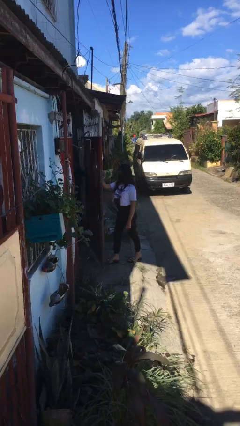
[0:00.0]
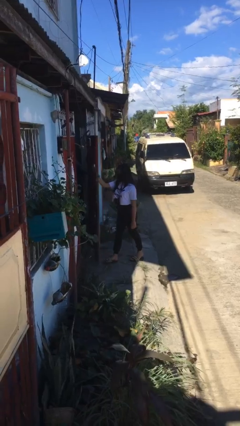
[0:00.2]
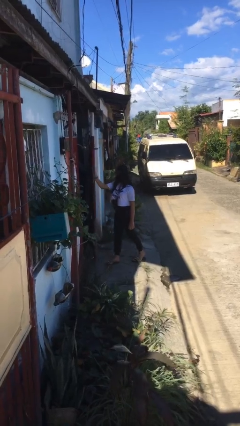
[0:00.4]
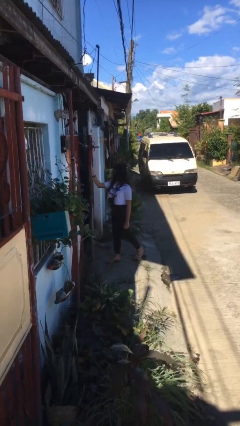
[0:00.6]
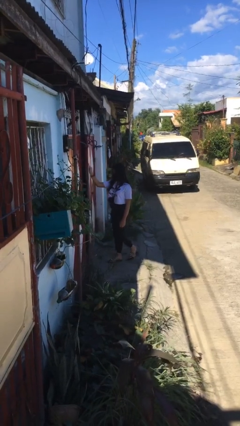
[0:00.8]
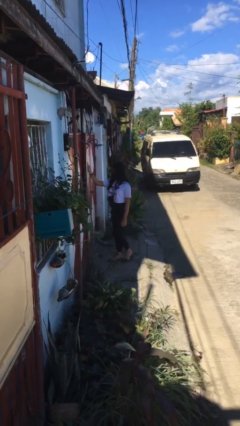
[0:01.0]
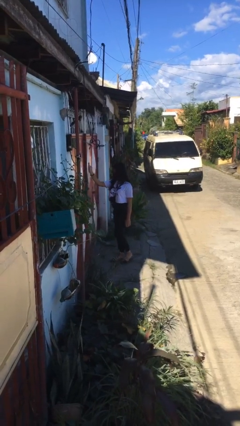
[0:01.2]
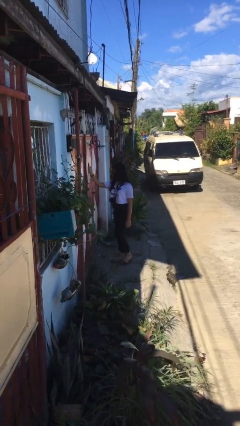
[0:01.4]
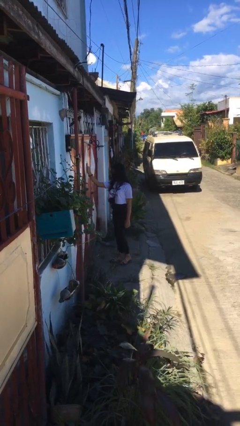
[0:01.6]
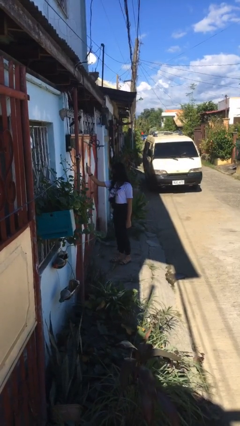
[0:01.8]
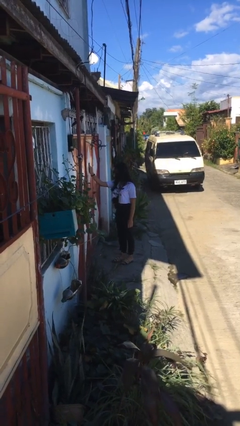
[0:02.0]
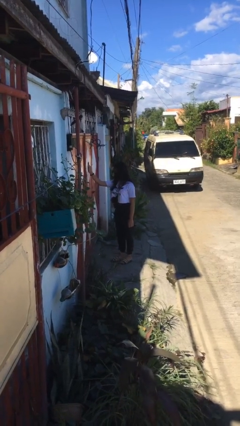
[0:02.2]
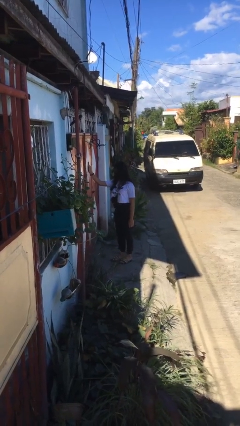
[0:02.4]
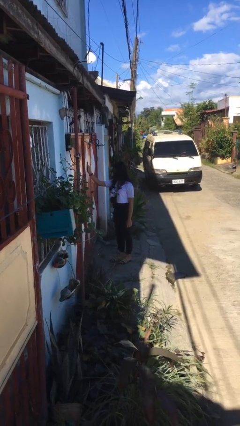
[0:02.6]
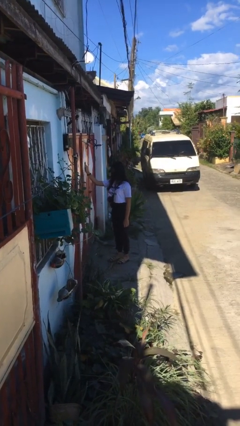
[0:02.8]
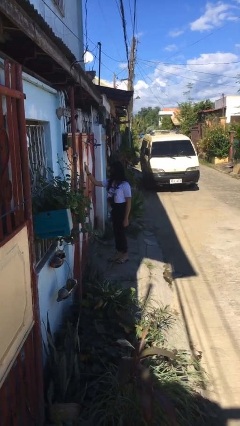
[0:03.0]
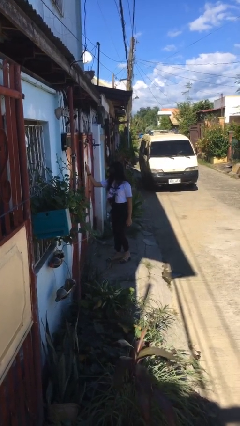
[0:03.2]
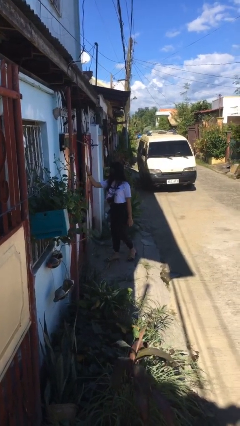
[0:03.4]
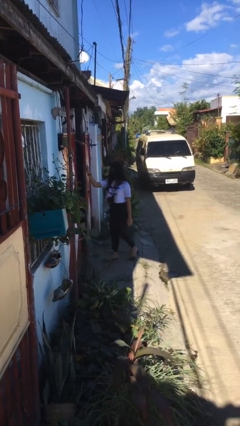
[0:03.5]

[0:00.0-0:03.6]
person closes gate

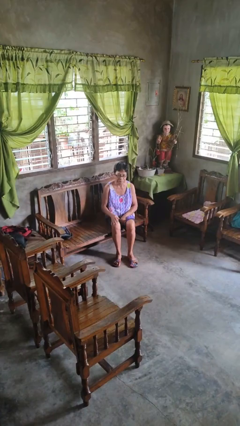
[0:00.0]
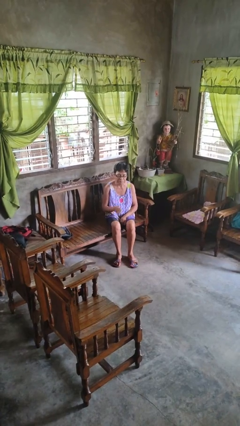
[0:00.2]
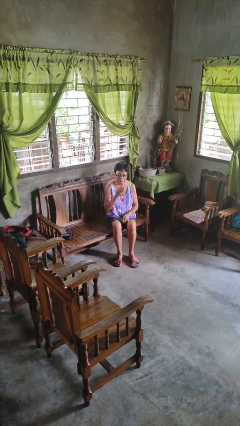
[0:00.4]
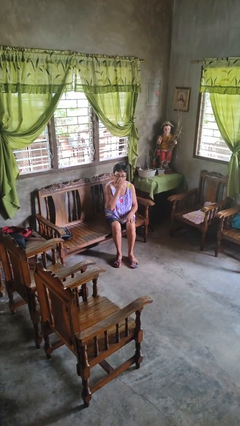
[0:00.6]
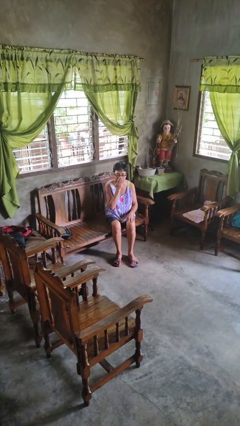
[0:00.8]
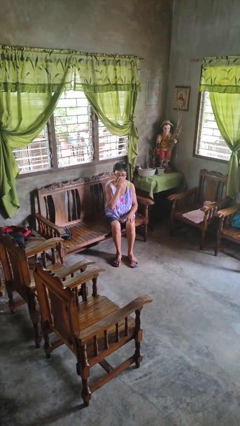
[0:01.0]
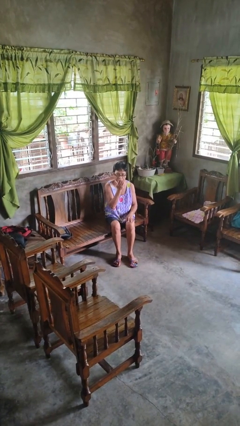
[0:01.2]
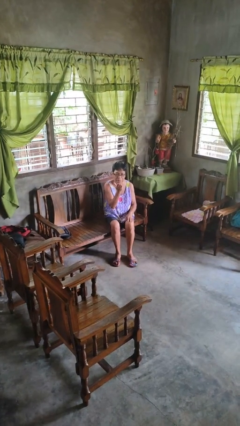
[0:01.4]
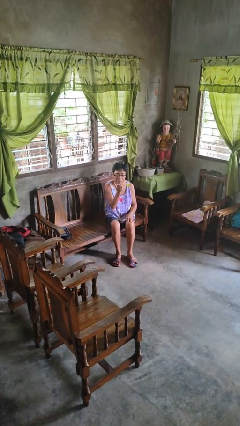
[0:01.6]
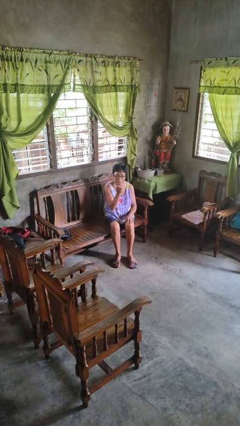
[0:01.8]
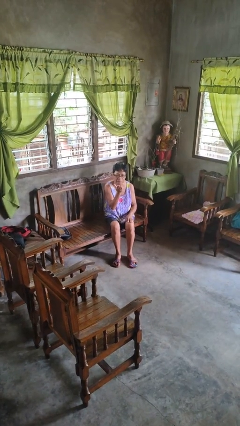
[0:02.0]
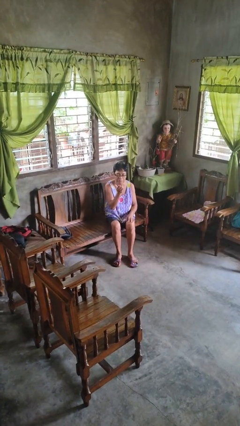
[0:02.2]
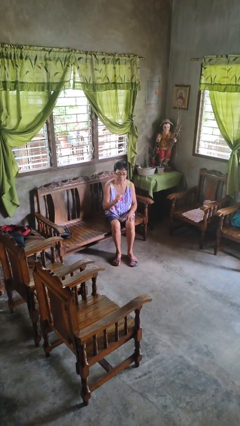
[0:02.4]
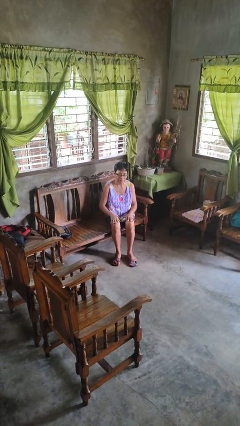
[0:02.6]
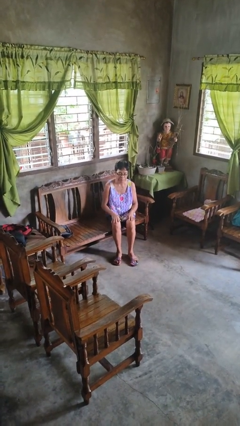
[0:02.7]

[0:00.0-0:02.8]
person gestures blow kiss

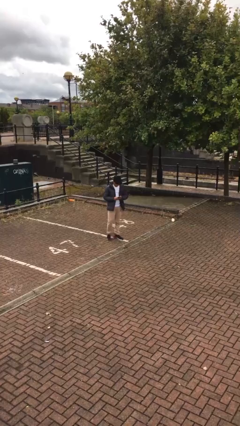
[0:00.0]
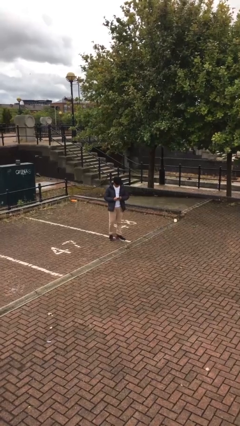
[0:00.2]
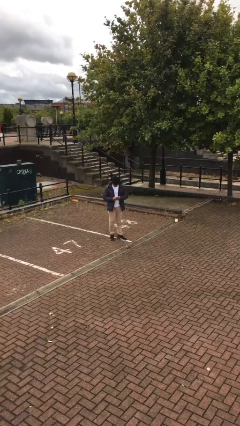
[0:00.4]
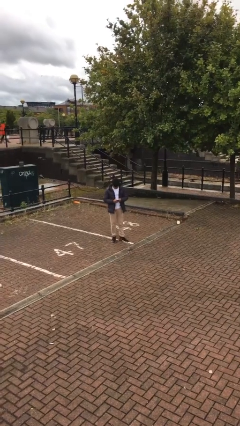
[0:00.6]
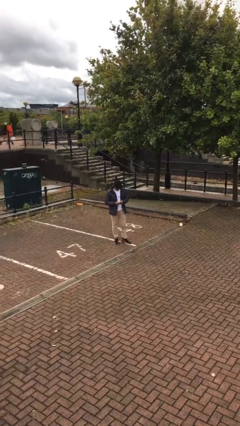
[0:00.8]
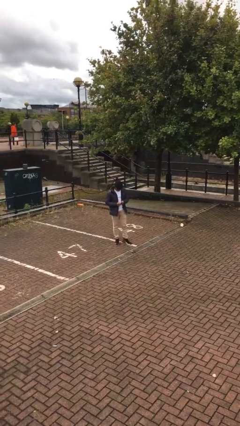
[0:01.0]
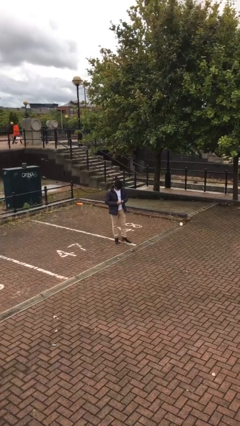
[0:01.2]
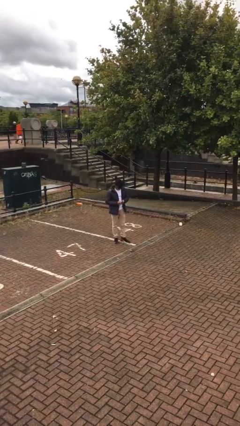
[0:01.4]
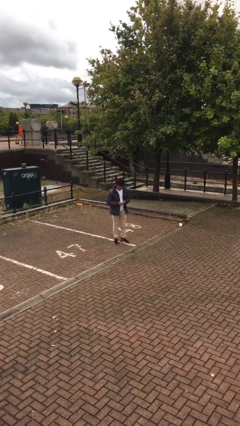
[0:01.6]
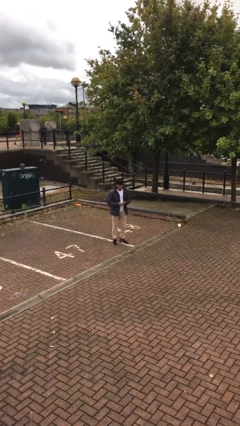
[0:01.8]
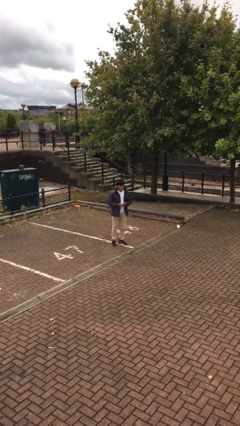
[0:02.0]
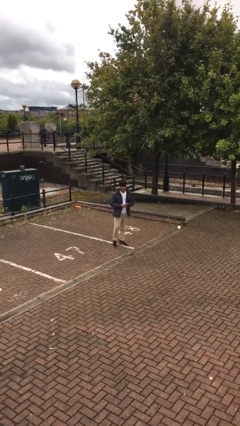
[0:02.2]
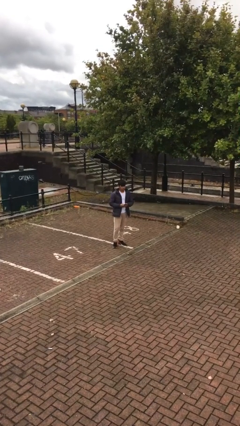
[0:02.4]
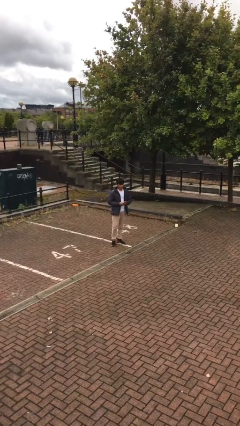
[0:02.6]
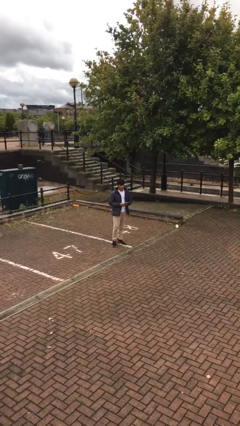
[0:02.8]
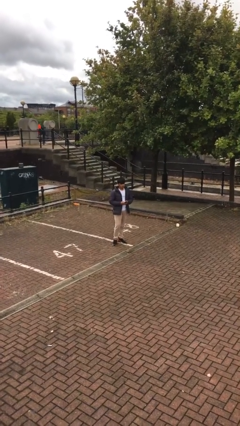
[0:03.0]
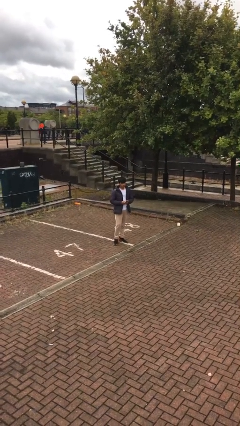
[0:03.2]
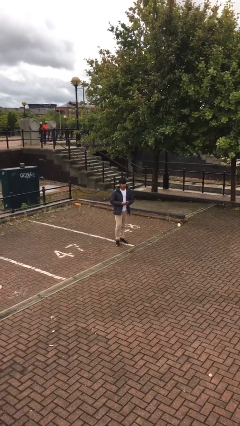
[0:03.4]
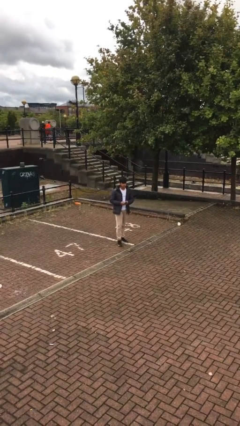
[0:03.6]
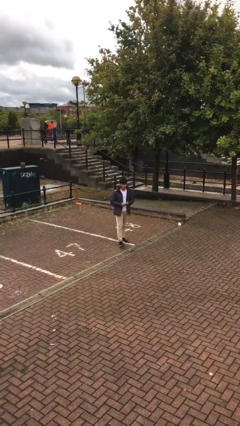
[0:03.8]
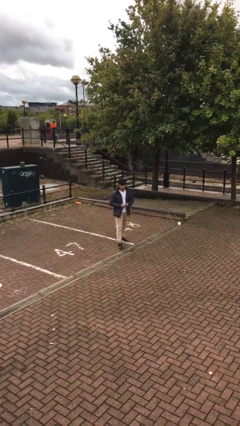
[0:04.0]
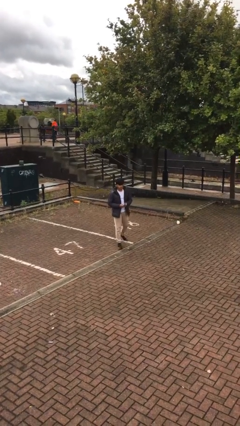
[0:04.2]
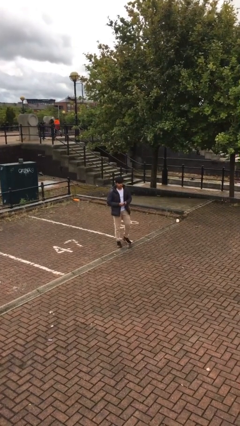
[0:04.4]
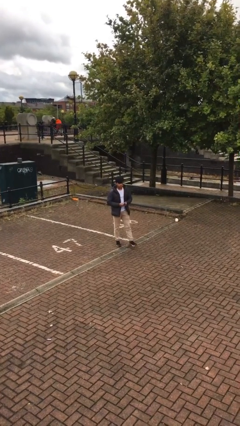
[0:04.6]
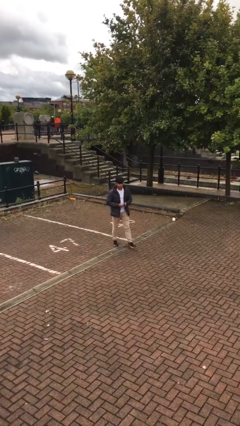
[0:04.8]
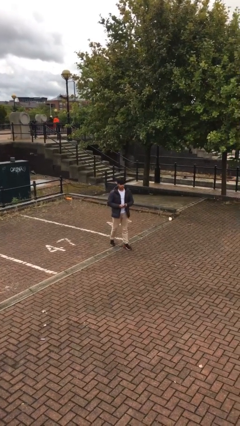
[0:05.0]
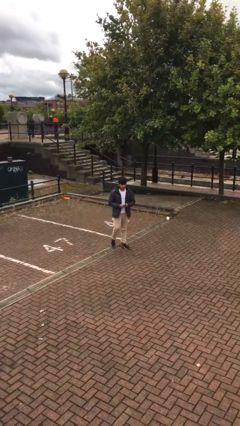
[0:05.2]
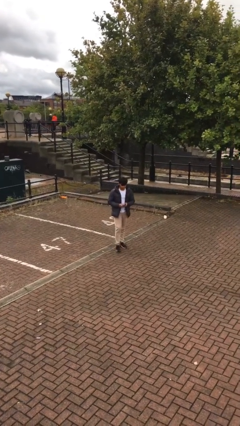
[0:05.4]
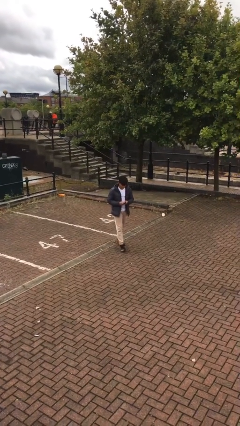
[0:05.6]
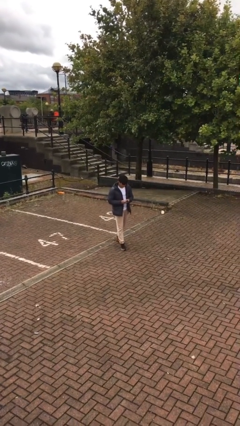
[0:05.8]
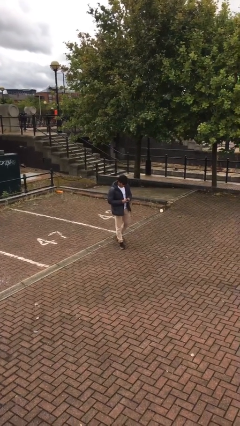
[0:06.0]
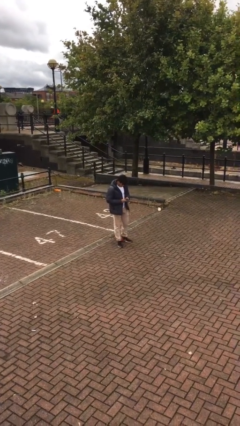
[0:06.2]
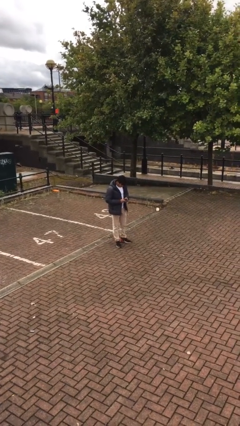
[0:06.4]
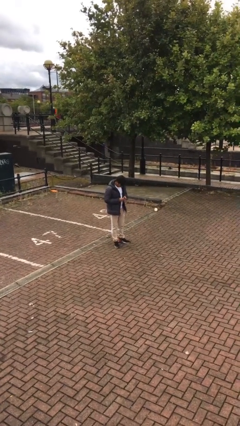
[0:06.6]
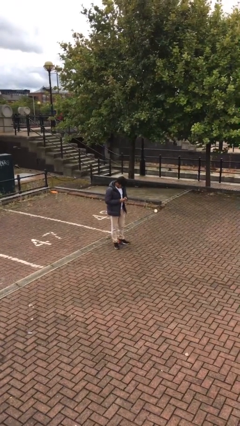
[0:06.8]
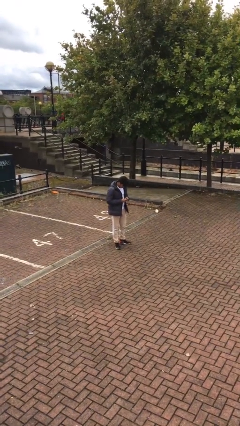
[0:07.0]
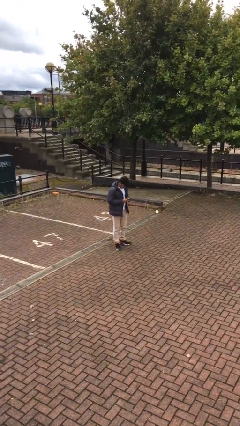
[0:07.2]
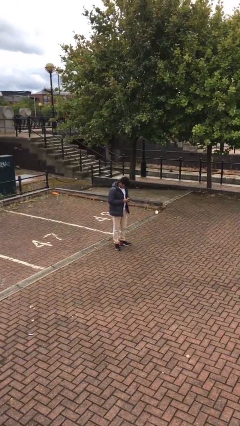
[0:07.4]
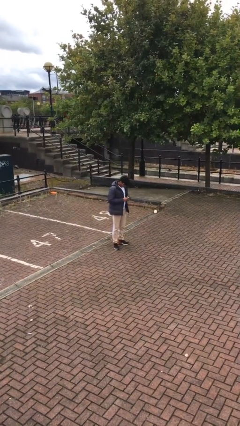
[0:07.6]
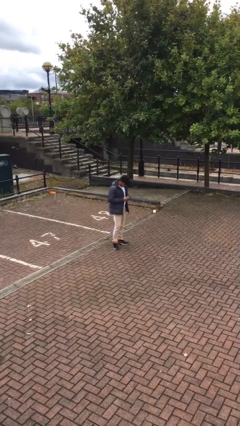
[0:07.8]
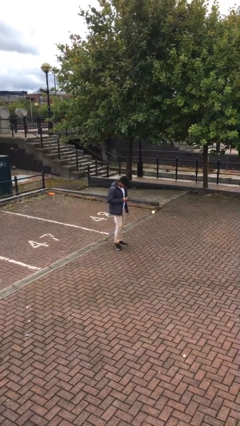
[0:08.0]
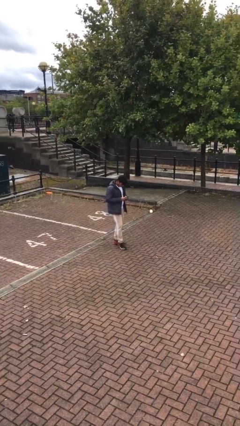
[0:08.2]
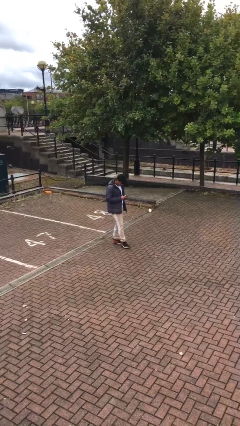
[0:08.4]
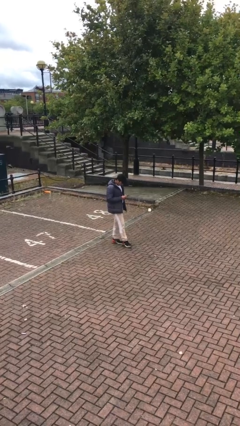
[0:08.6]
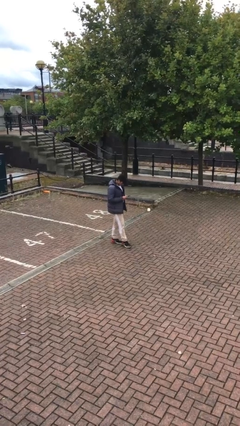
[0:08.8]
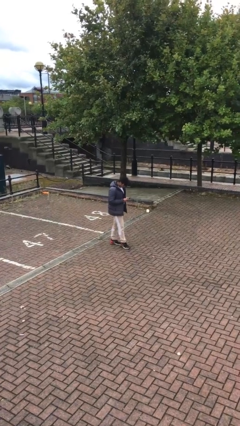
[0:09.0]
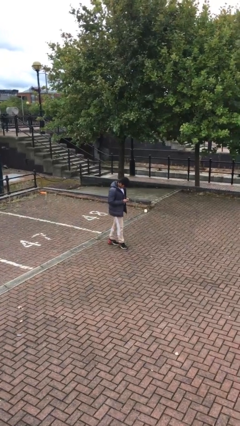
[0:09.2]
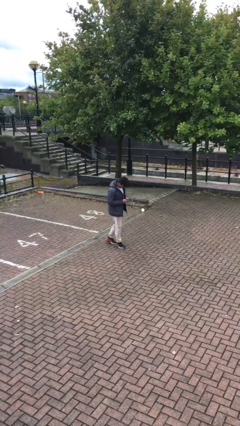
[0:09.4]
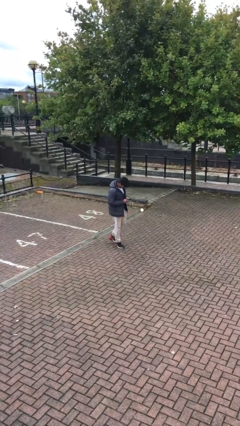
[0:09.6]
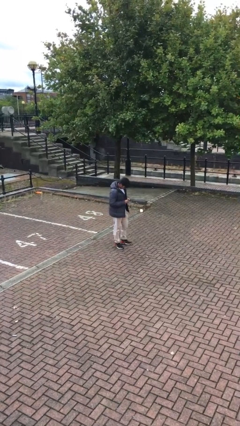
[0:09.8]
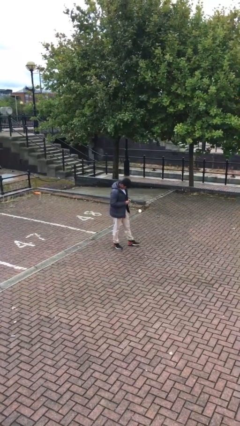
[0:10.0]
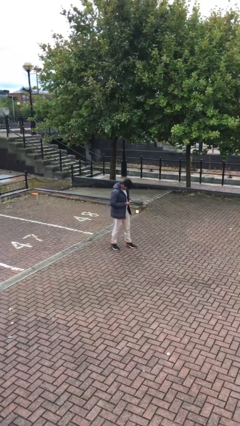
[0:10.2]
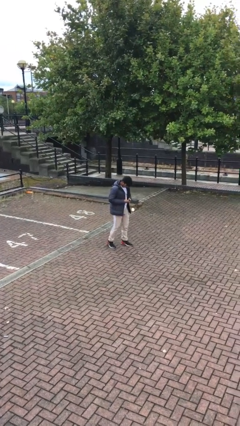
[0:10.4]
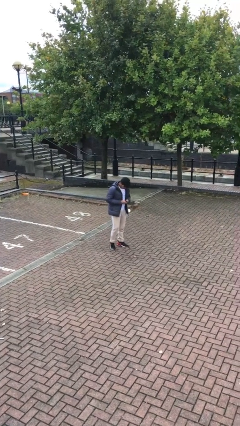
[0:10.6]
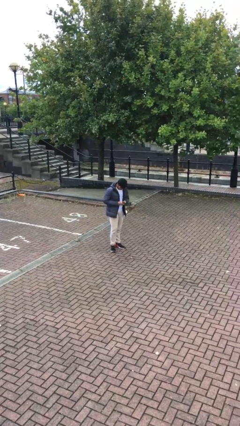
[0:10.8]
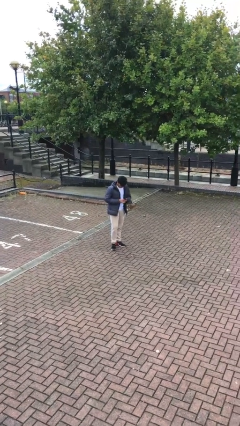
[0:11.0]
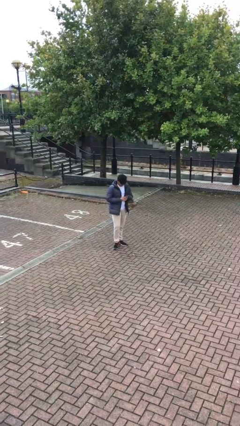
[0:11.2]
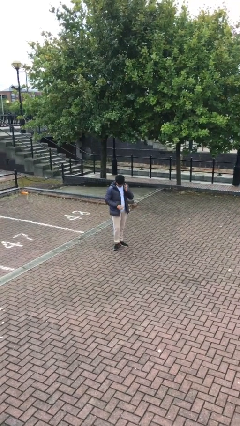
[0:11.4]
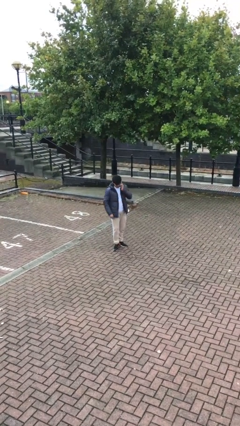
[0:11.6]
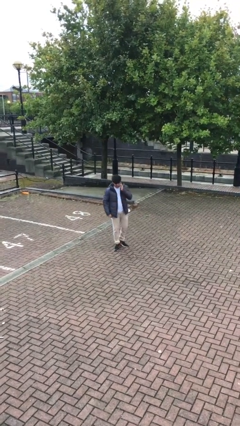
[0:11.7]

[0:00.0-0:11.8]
person texts on phone
